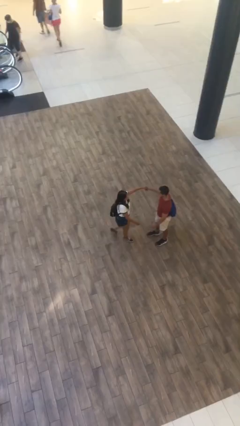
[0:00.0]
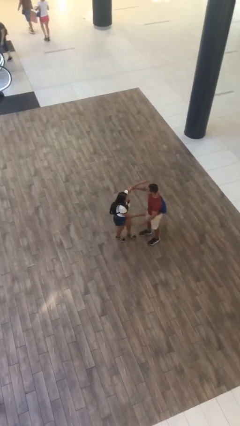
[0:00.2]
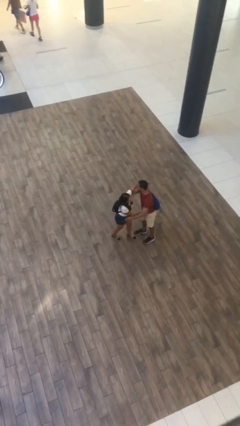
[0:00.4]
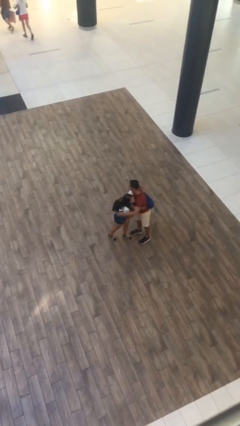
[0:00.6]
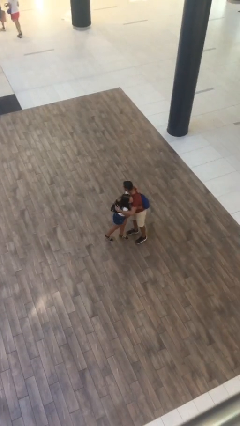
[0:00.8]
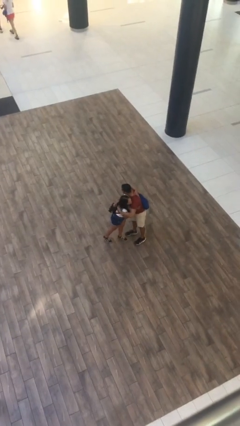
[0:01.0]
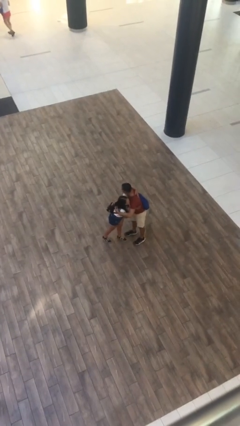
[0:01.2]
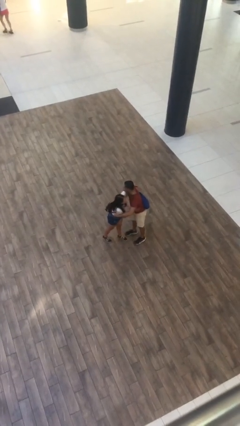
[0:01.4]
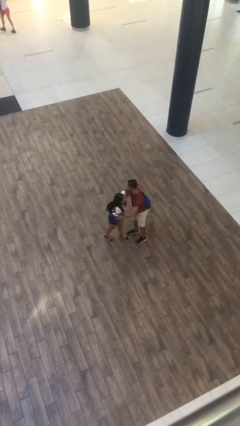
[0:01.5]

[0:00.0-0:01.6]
person embraces person

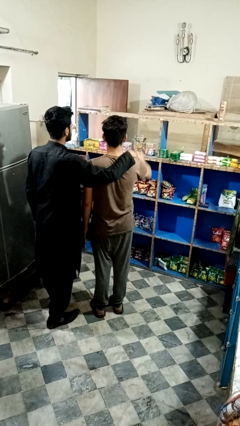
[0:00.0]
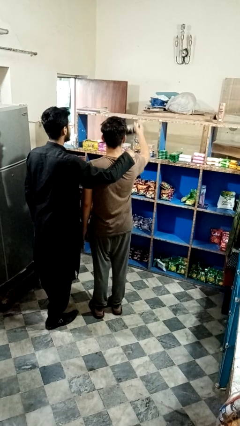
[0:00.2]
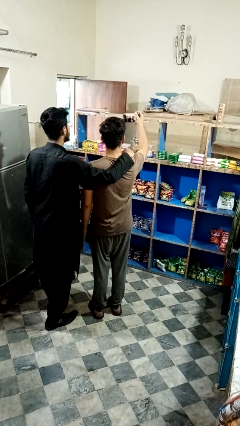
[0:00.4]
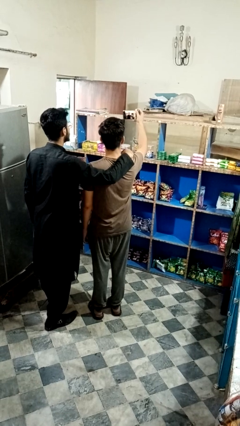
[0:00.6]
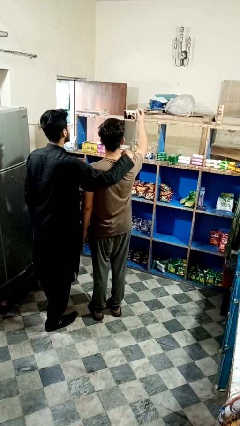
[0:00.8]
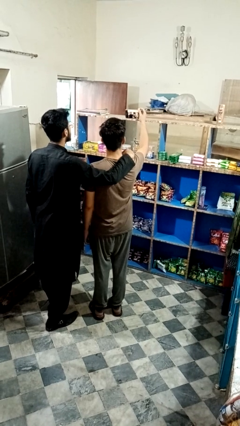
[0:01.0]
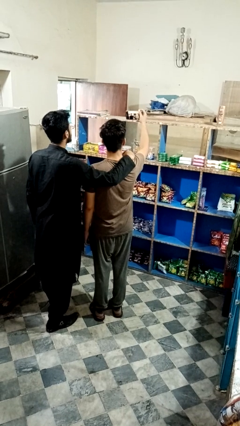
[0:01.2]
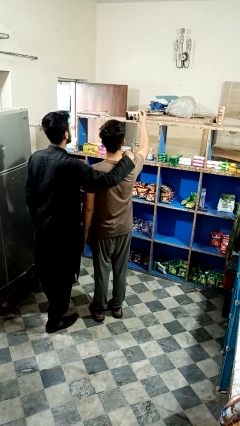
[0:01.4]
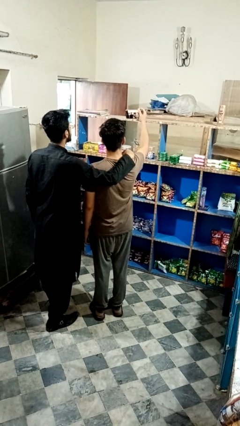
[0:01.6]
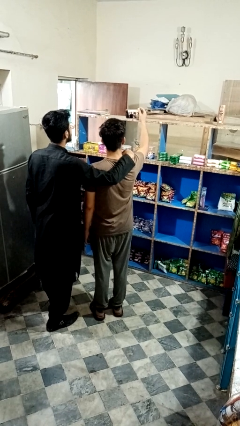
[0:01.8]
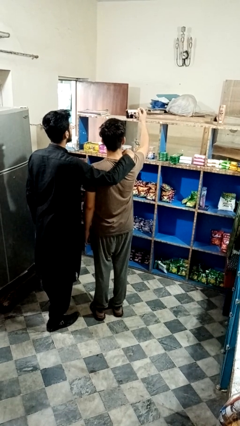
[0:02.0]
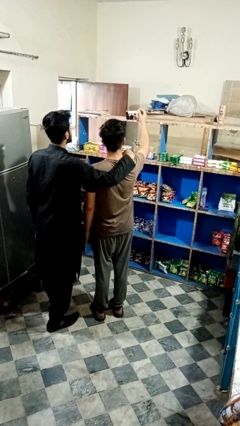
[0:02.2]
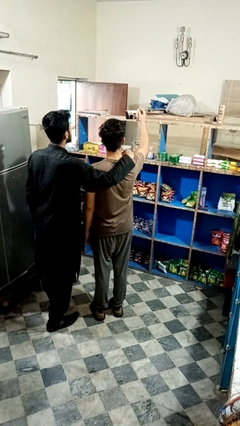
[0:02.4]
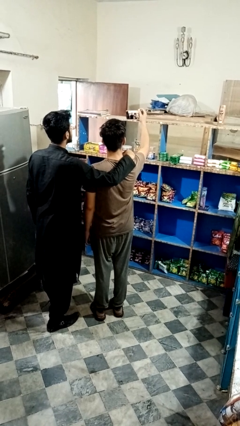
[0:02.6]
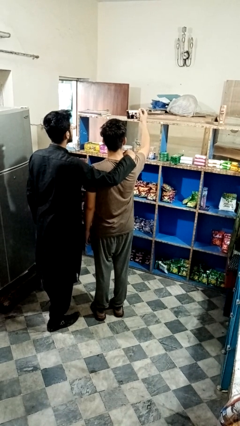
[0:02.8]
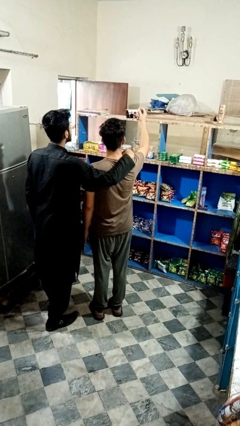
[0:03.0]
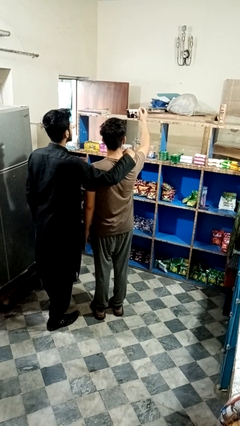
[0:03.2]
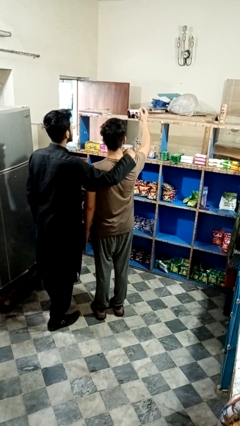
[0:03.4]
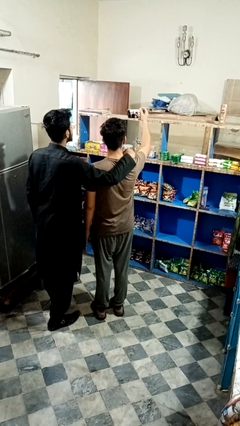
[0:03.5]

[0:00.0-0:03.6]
person takes selfie with person

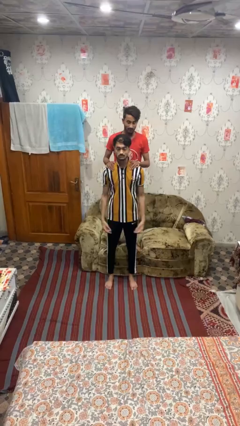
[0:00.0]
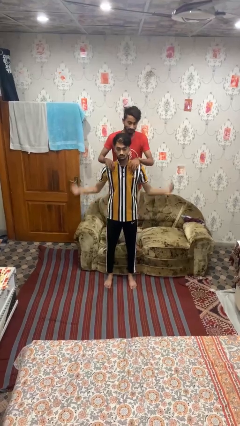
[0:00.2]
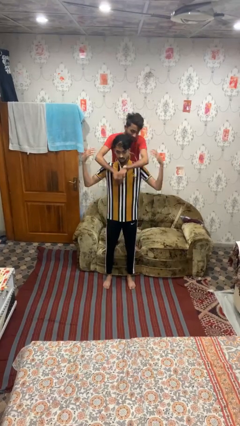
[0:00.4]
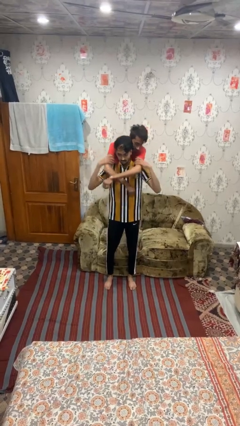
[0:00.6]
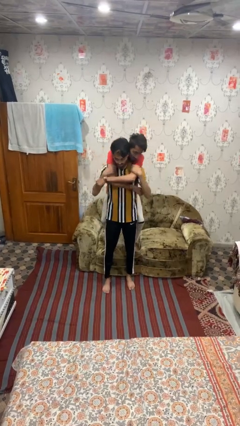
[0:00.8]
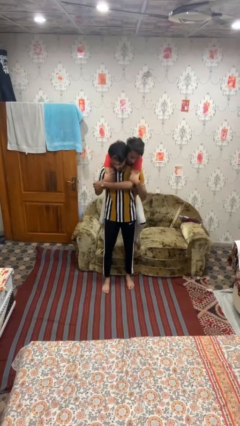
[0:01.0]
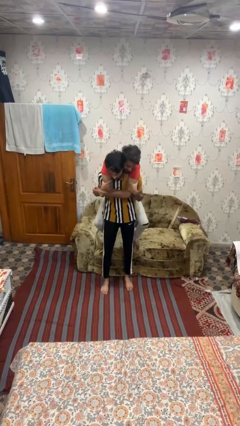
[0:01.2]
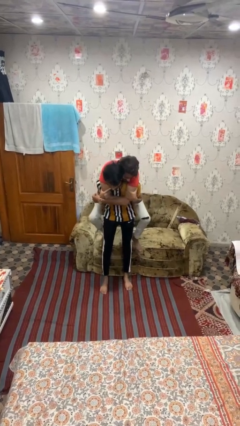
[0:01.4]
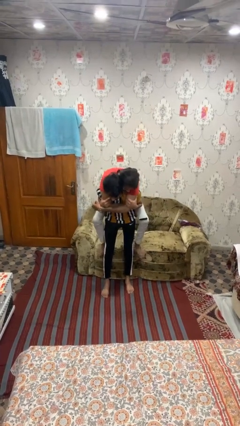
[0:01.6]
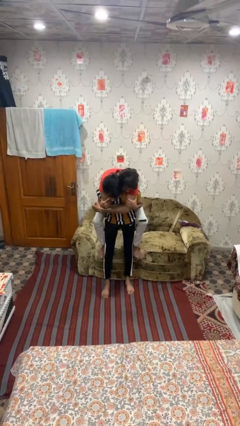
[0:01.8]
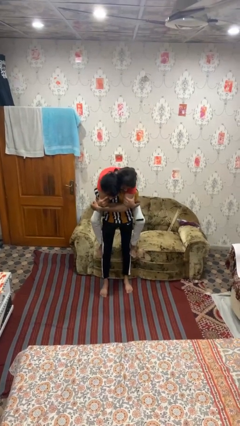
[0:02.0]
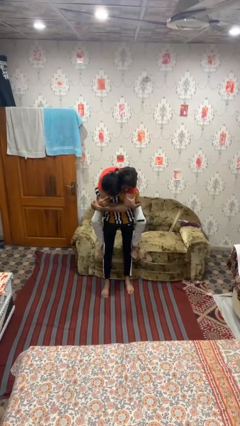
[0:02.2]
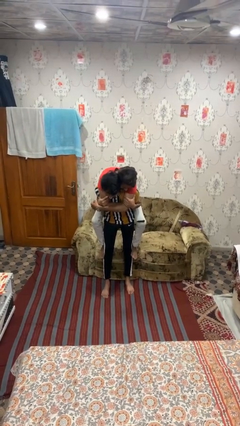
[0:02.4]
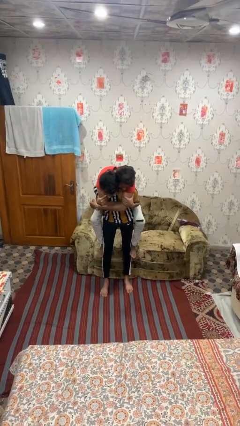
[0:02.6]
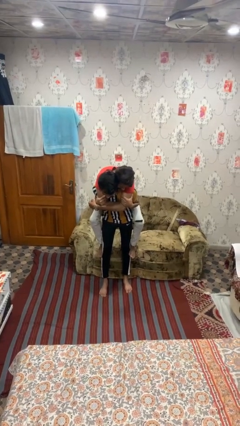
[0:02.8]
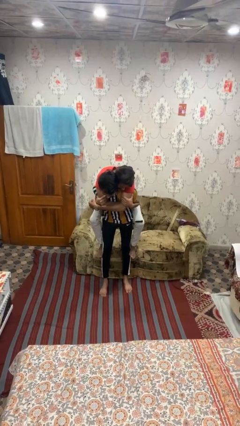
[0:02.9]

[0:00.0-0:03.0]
person carries person on back

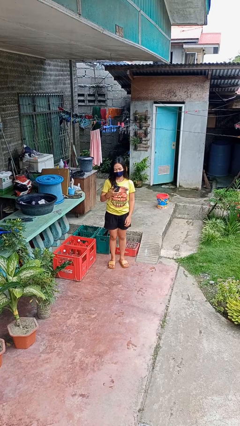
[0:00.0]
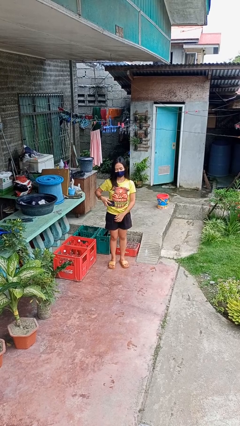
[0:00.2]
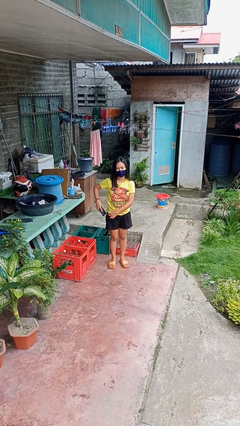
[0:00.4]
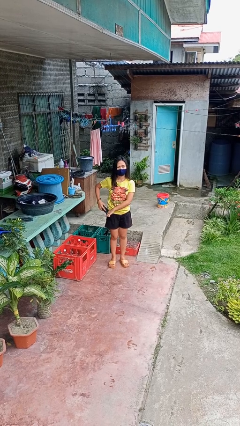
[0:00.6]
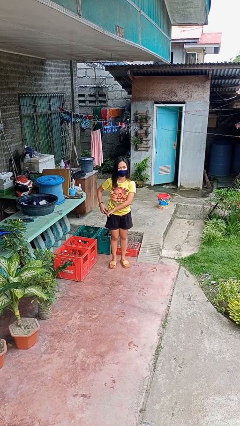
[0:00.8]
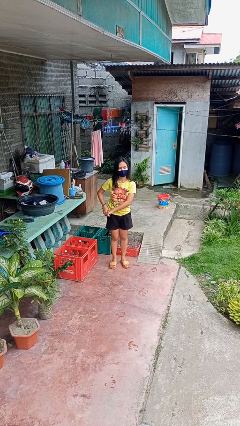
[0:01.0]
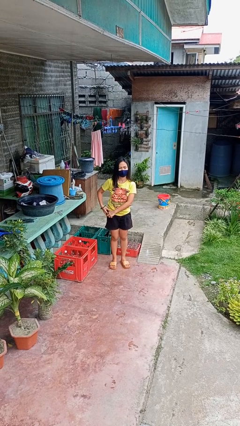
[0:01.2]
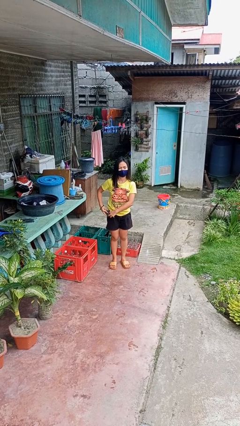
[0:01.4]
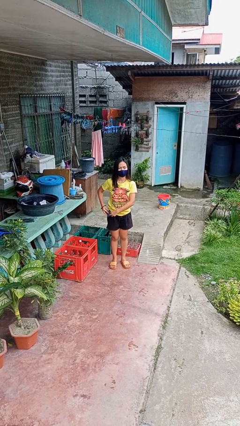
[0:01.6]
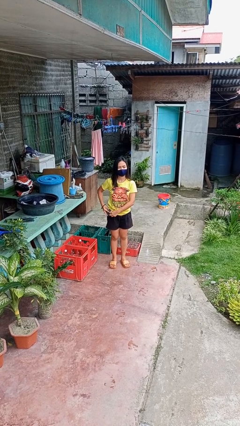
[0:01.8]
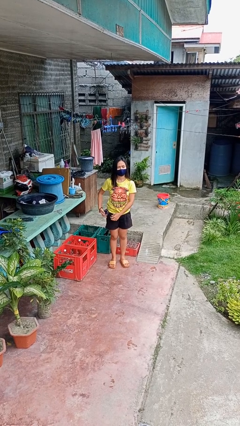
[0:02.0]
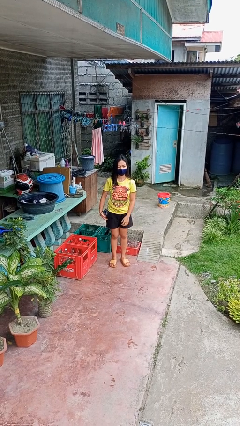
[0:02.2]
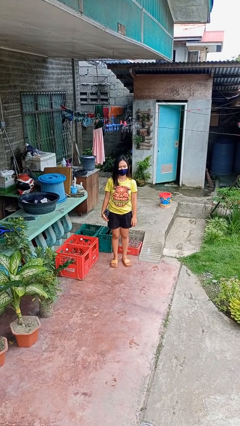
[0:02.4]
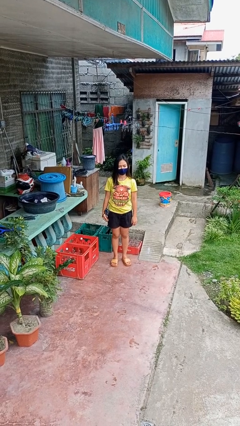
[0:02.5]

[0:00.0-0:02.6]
person puts phone into pocket

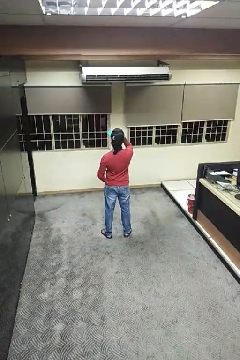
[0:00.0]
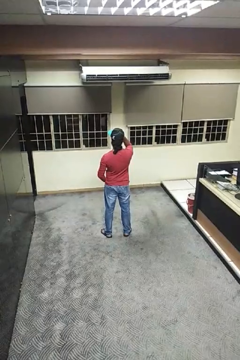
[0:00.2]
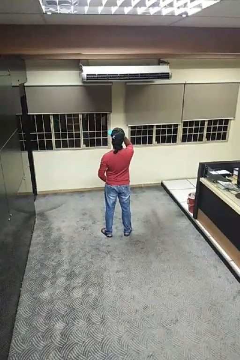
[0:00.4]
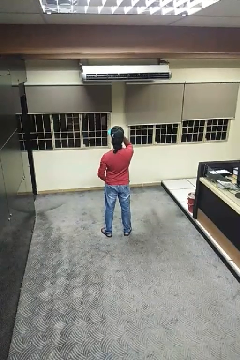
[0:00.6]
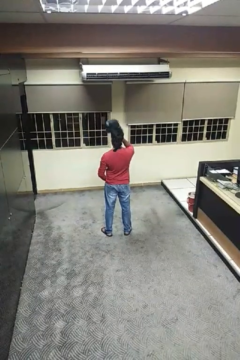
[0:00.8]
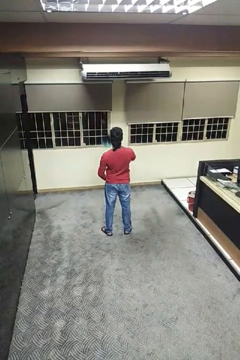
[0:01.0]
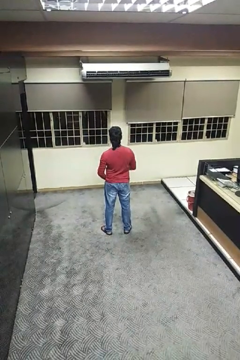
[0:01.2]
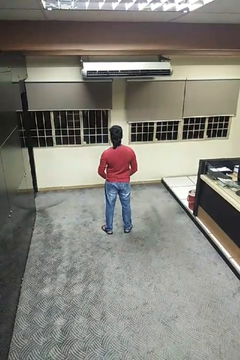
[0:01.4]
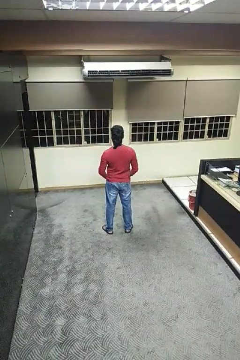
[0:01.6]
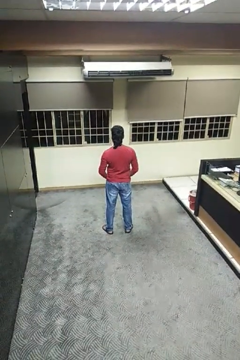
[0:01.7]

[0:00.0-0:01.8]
person takes off hat

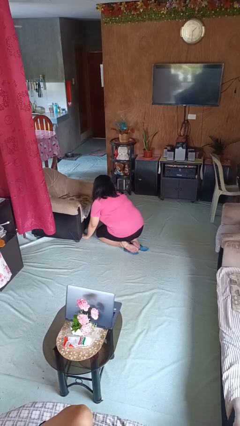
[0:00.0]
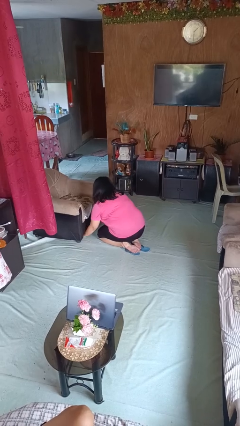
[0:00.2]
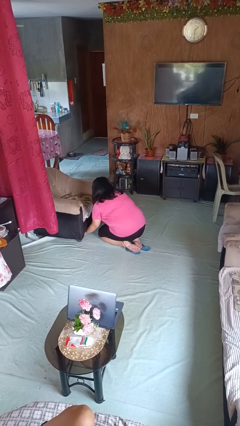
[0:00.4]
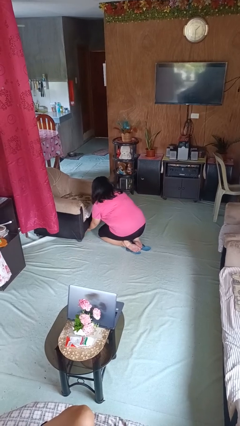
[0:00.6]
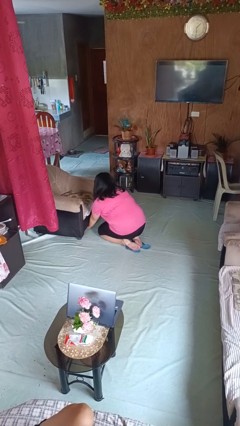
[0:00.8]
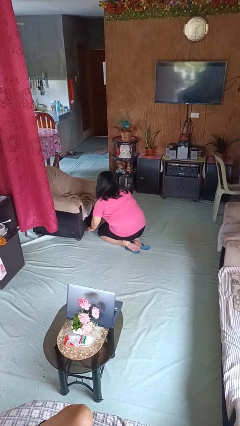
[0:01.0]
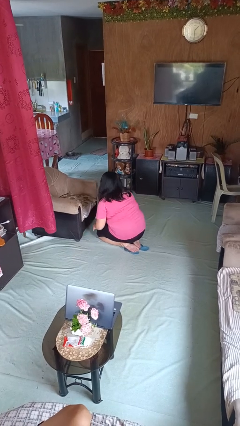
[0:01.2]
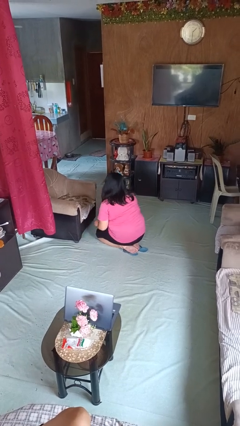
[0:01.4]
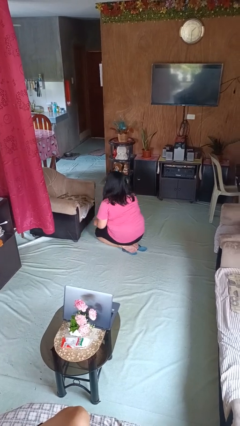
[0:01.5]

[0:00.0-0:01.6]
person searches under couch

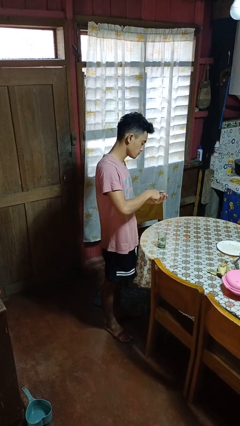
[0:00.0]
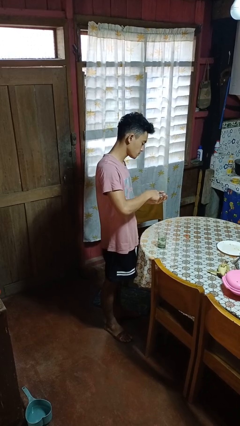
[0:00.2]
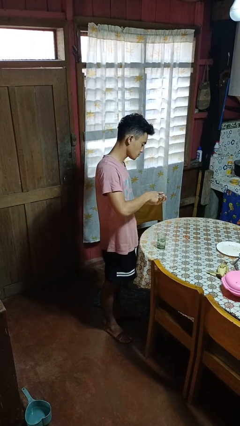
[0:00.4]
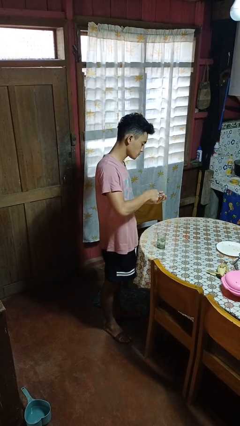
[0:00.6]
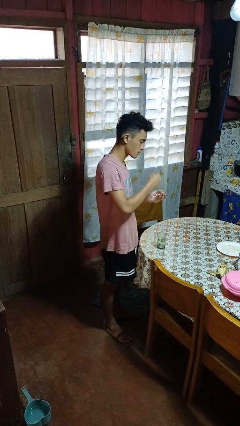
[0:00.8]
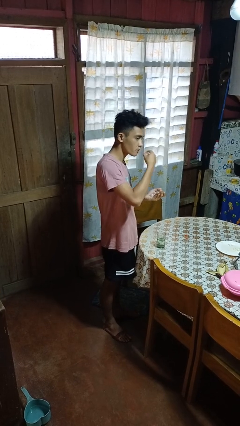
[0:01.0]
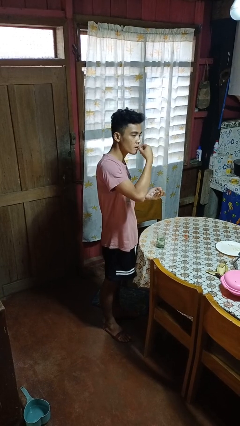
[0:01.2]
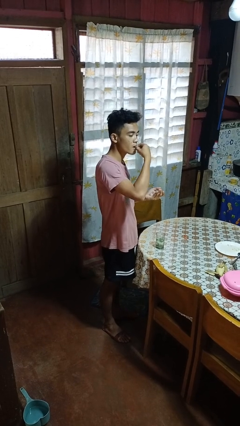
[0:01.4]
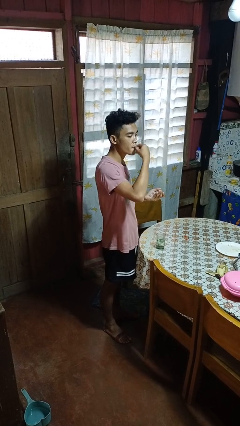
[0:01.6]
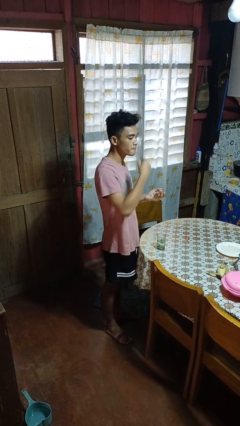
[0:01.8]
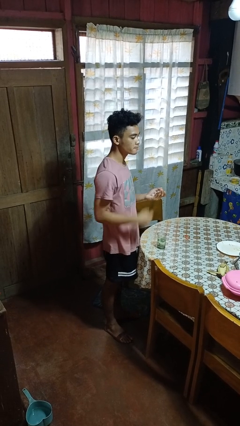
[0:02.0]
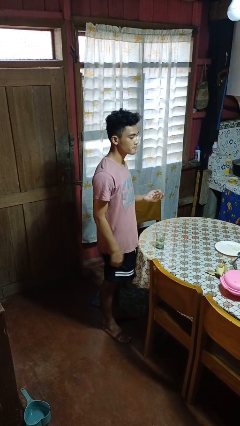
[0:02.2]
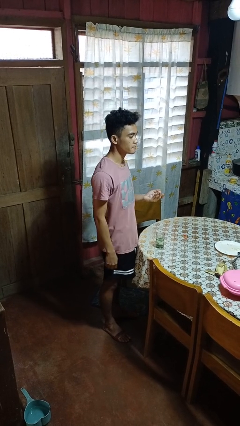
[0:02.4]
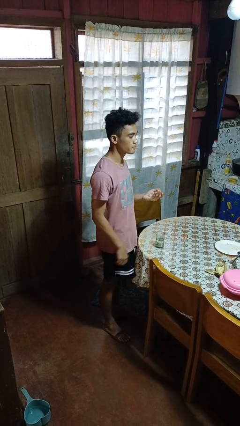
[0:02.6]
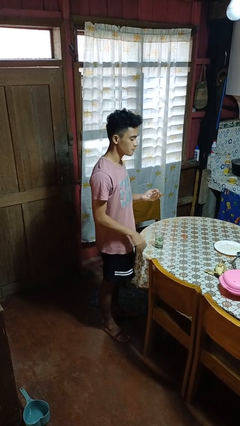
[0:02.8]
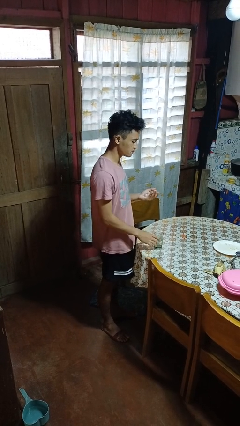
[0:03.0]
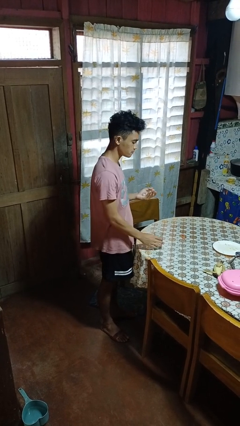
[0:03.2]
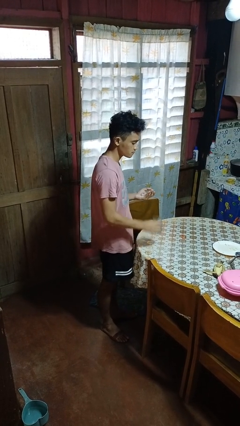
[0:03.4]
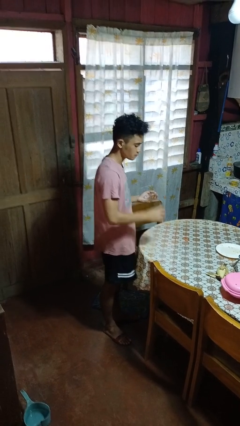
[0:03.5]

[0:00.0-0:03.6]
person takes medicine pills
